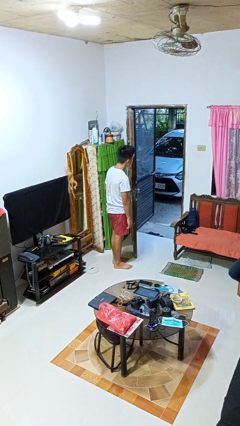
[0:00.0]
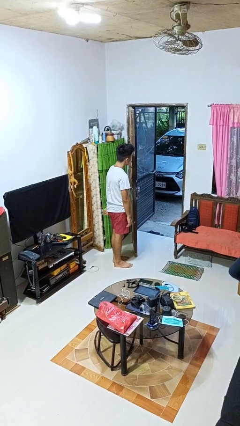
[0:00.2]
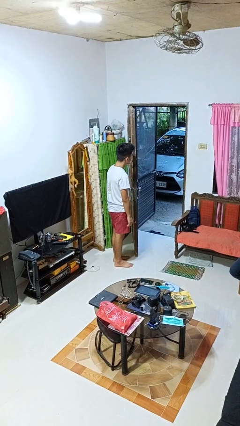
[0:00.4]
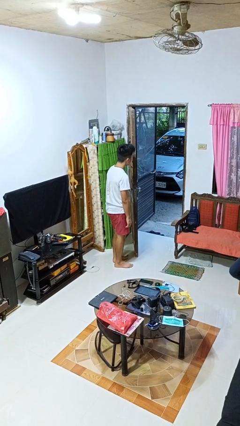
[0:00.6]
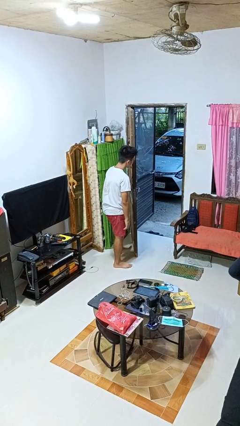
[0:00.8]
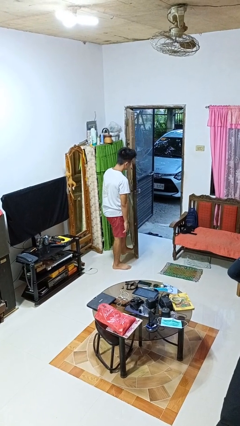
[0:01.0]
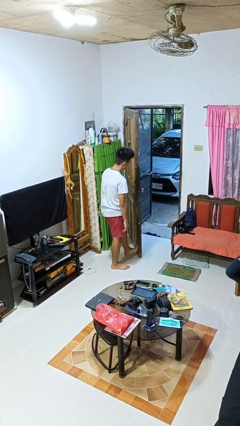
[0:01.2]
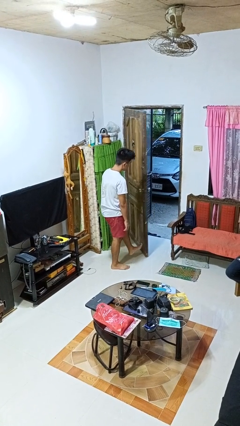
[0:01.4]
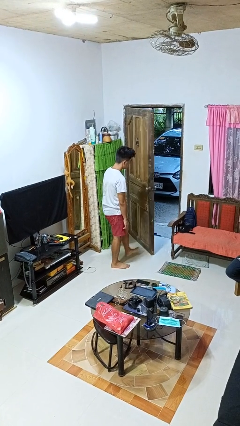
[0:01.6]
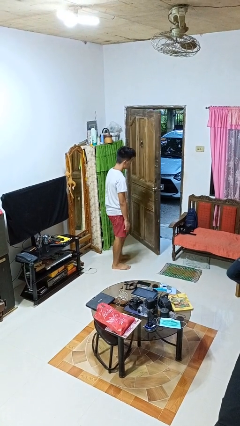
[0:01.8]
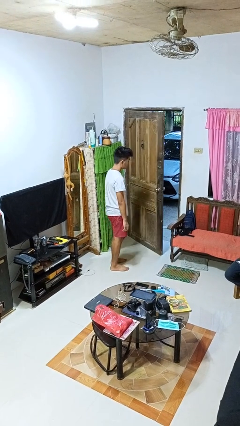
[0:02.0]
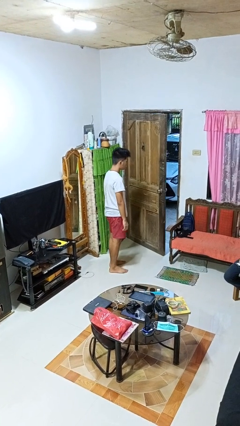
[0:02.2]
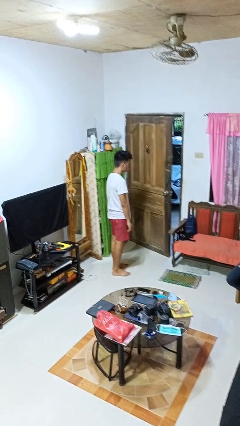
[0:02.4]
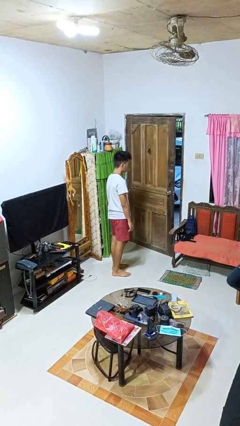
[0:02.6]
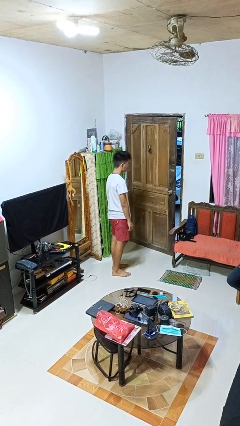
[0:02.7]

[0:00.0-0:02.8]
person closes door with foot

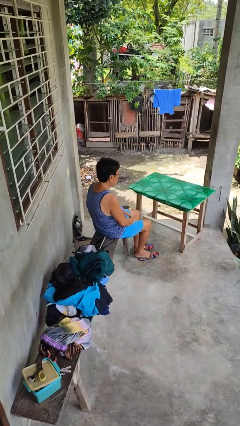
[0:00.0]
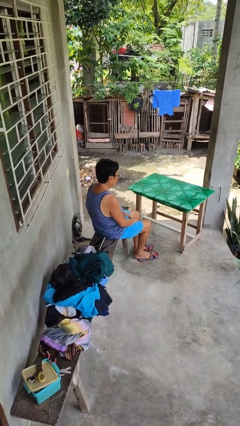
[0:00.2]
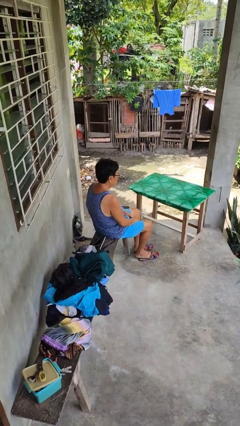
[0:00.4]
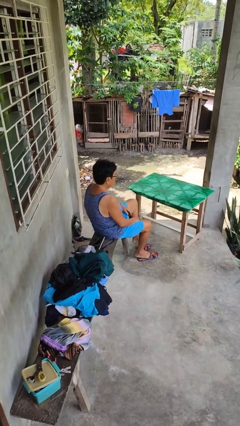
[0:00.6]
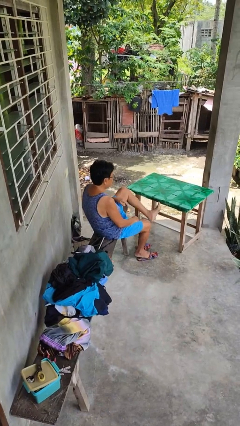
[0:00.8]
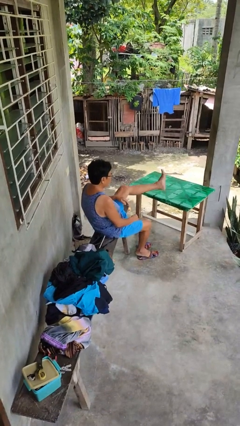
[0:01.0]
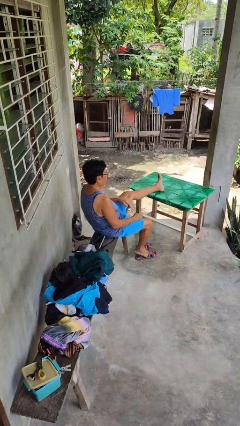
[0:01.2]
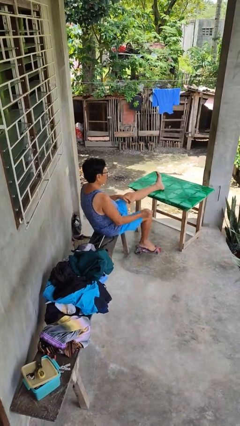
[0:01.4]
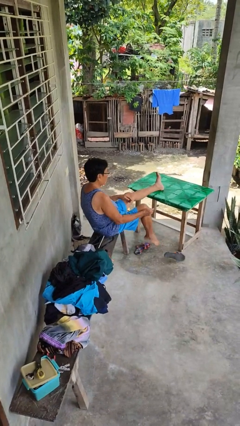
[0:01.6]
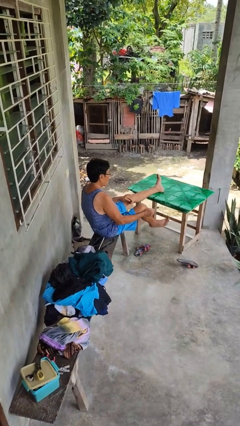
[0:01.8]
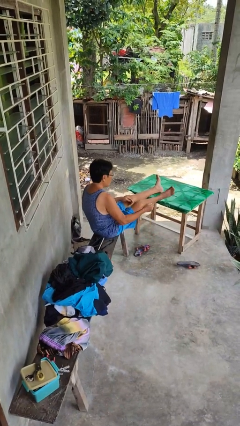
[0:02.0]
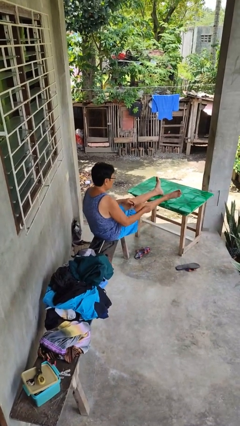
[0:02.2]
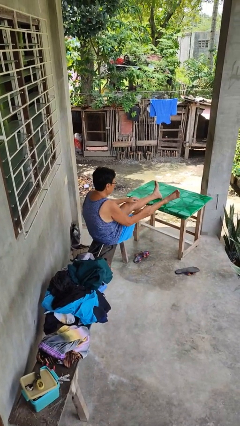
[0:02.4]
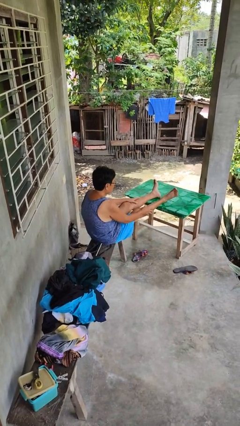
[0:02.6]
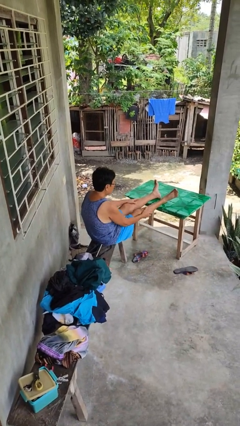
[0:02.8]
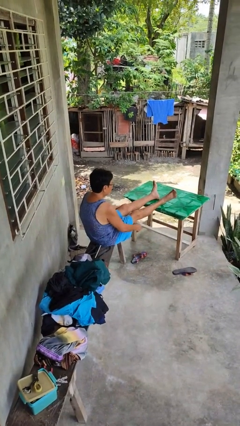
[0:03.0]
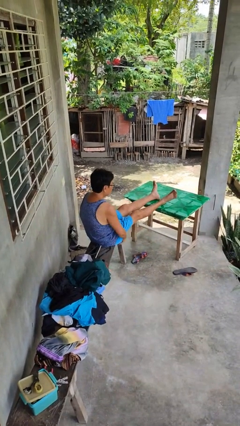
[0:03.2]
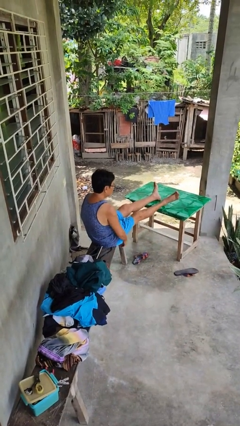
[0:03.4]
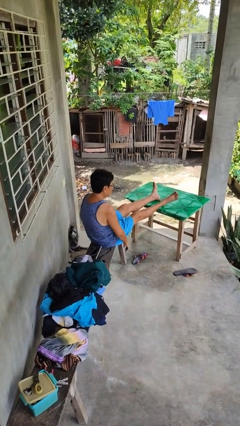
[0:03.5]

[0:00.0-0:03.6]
person puts feet up

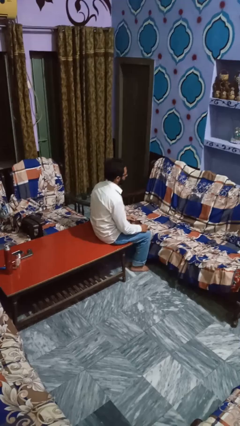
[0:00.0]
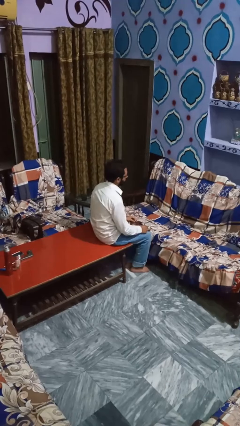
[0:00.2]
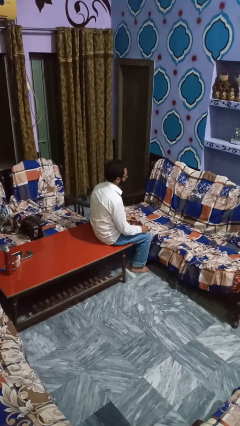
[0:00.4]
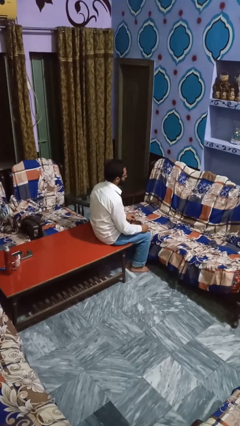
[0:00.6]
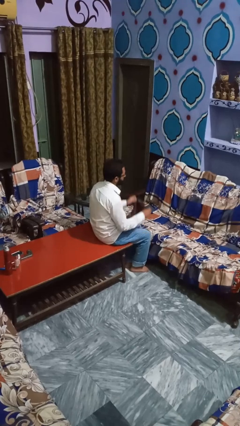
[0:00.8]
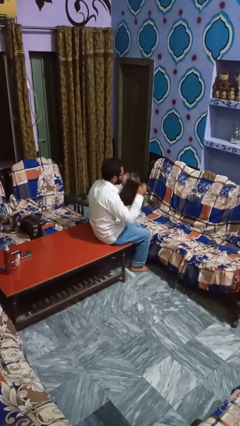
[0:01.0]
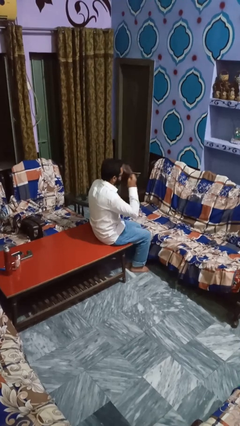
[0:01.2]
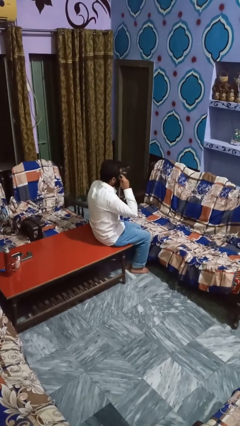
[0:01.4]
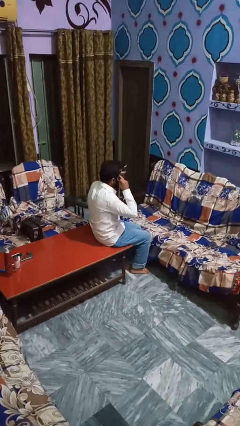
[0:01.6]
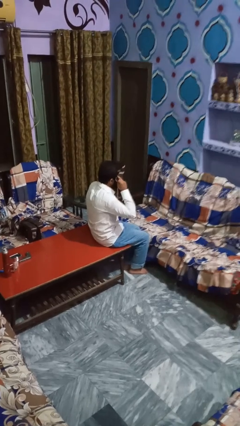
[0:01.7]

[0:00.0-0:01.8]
person yawns

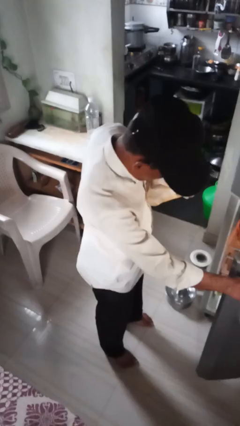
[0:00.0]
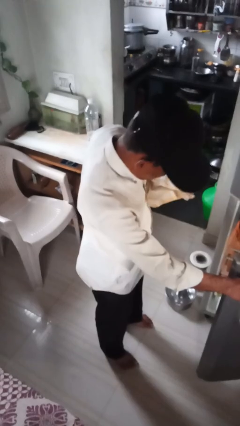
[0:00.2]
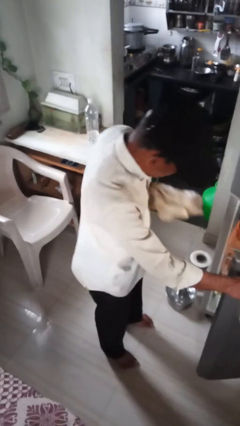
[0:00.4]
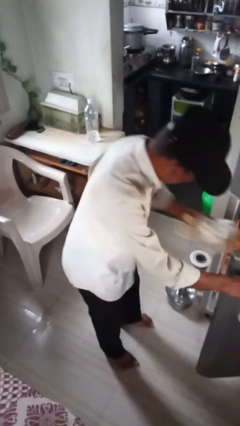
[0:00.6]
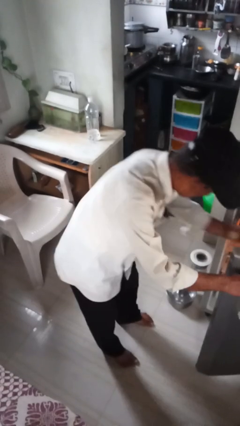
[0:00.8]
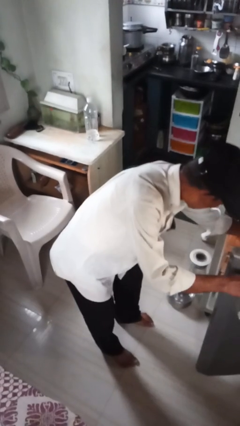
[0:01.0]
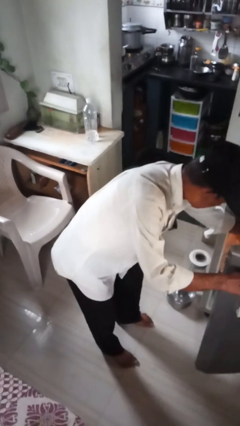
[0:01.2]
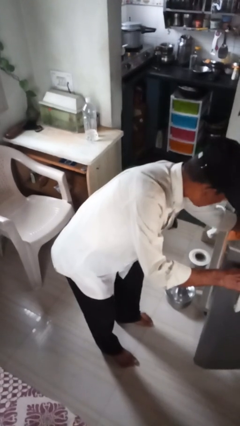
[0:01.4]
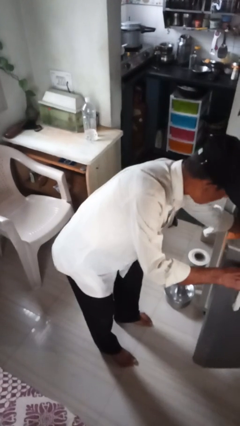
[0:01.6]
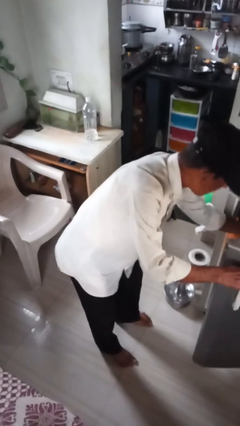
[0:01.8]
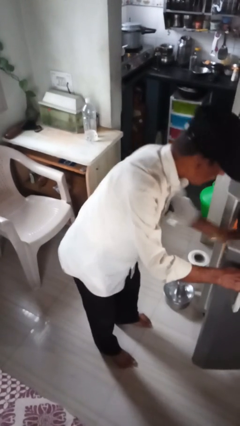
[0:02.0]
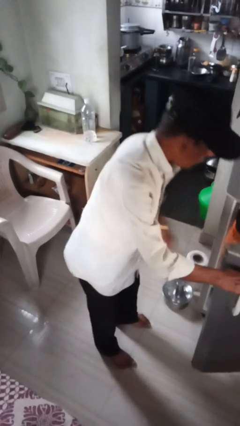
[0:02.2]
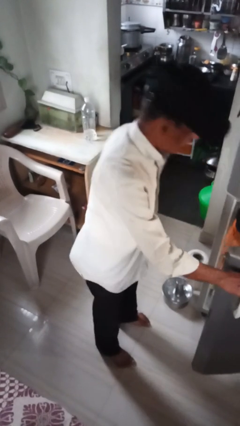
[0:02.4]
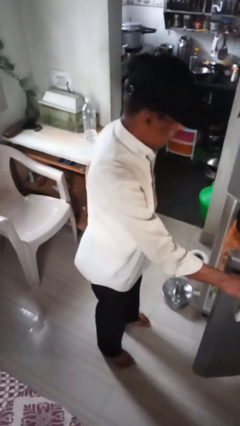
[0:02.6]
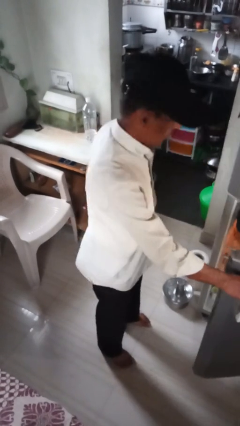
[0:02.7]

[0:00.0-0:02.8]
person loads clotheswasher

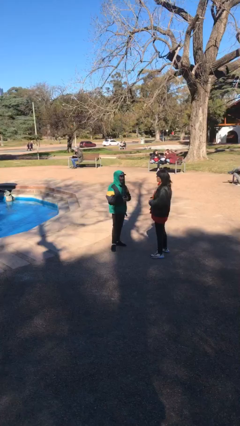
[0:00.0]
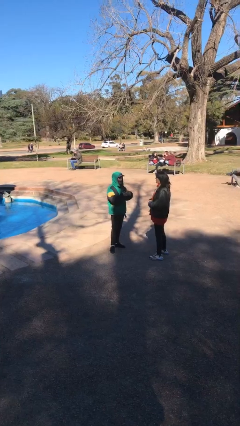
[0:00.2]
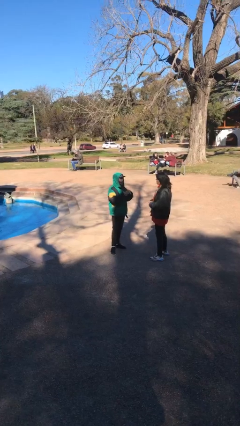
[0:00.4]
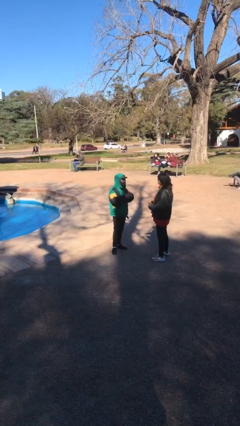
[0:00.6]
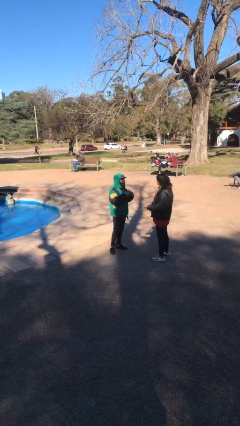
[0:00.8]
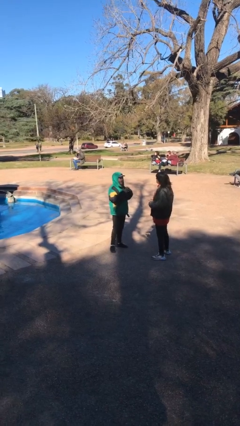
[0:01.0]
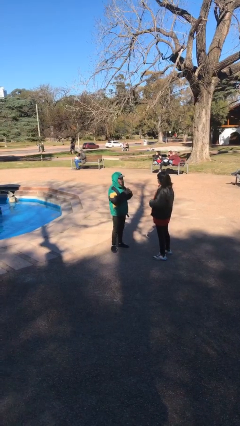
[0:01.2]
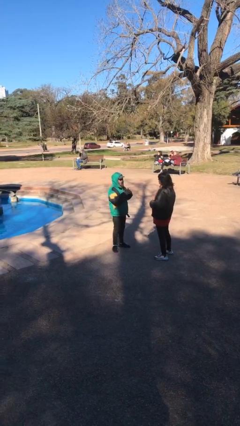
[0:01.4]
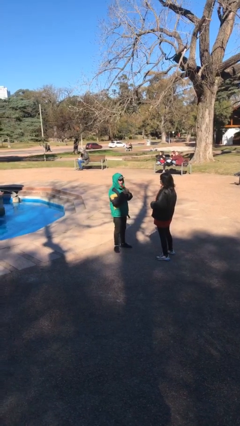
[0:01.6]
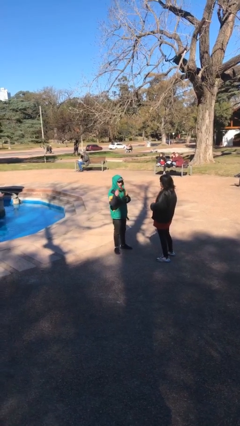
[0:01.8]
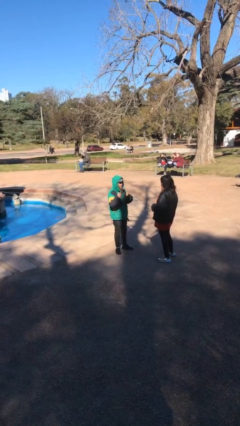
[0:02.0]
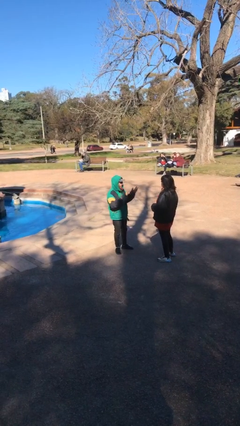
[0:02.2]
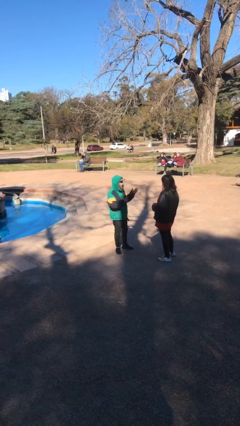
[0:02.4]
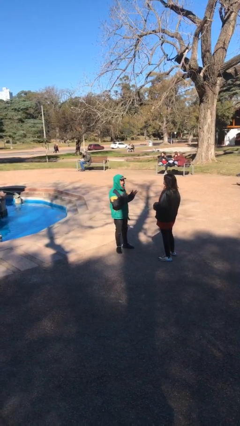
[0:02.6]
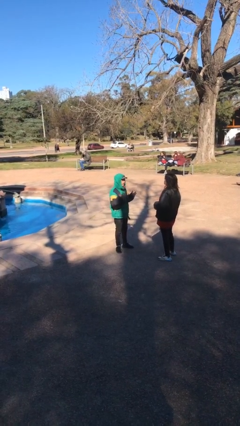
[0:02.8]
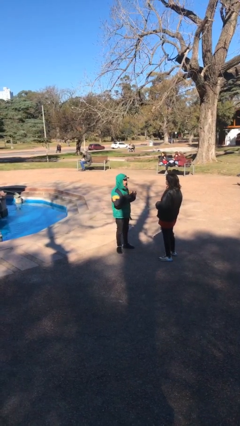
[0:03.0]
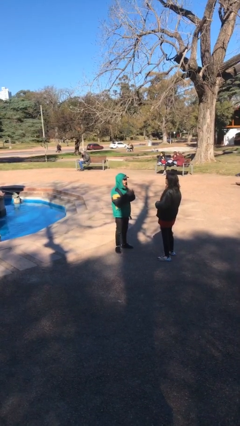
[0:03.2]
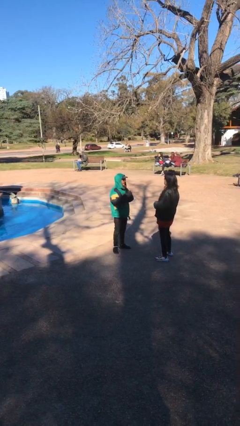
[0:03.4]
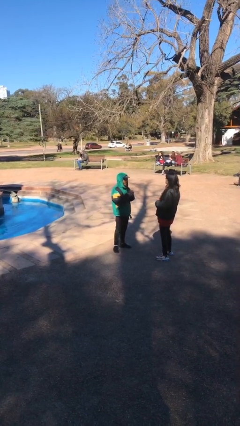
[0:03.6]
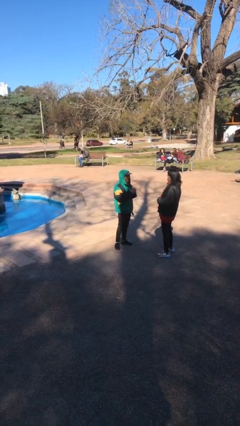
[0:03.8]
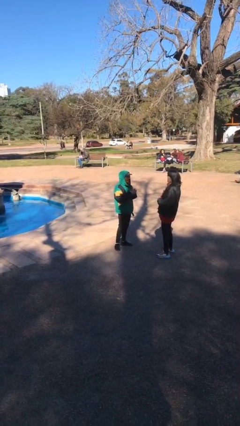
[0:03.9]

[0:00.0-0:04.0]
person talks to person

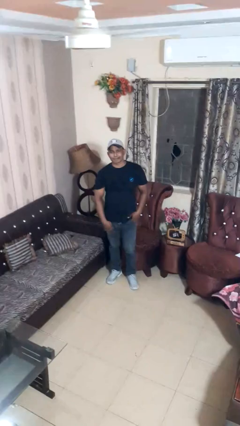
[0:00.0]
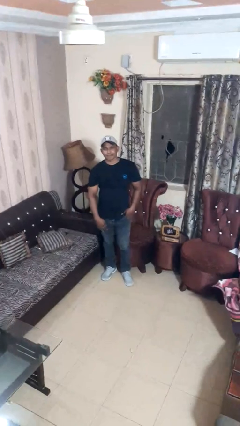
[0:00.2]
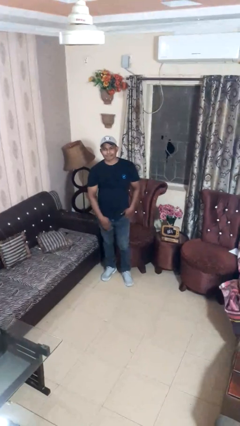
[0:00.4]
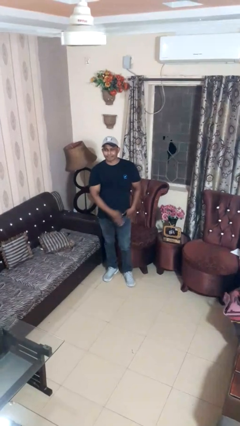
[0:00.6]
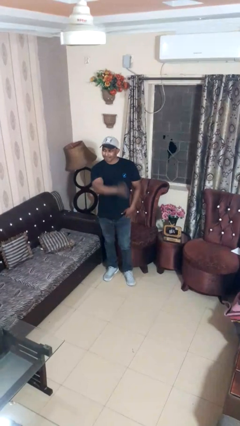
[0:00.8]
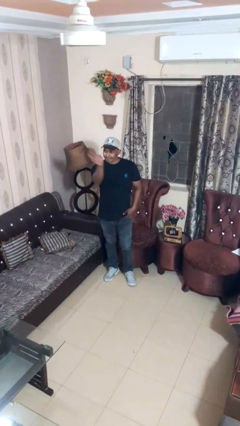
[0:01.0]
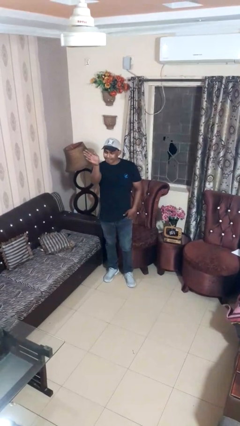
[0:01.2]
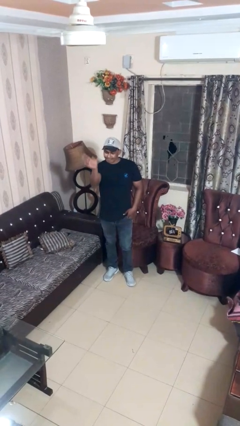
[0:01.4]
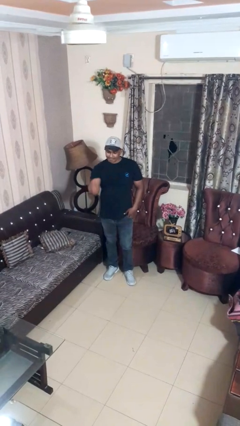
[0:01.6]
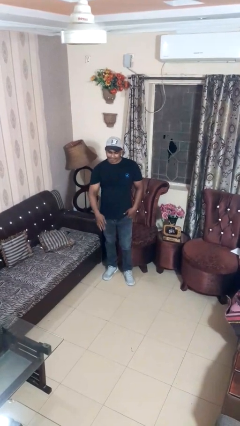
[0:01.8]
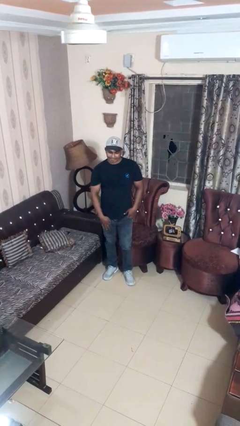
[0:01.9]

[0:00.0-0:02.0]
person gestures swipe left
